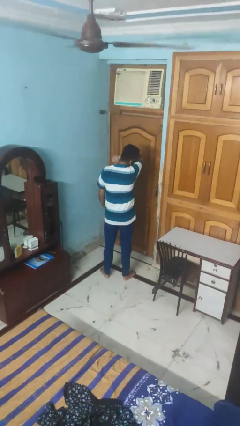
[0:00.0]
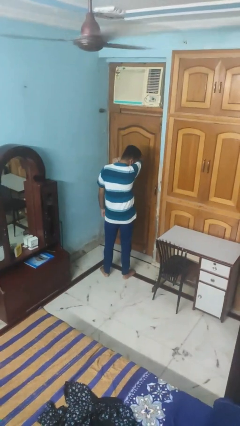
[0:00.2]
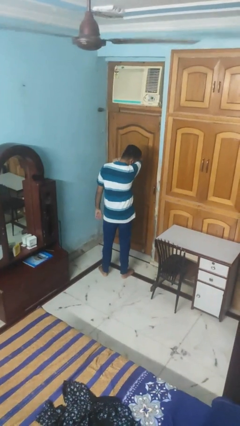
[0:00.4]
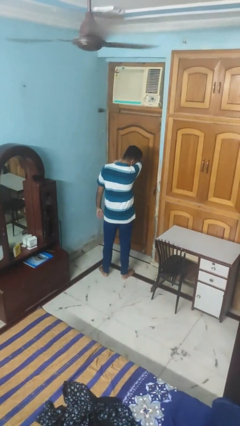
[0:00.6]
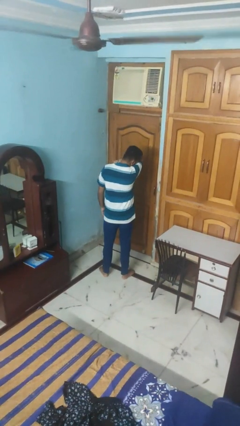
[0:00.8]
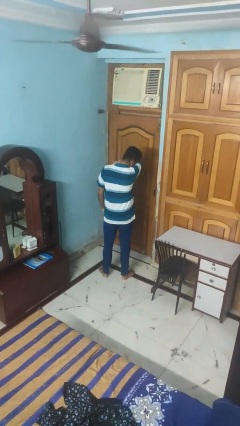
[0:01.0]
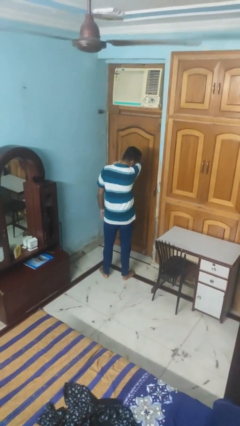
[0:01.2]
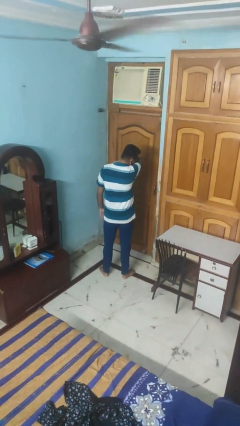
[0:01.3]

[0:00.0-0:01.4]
person sneezes into arm

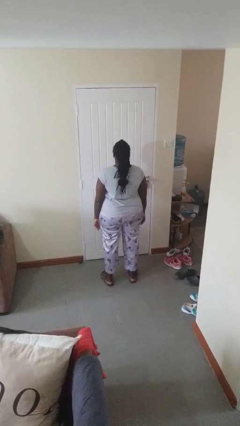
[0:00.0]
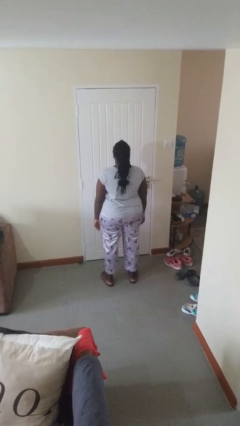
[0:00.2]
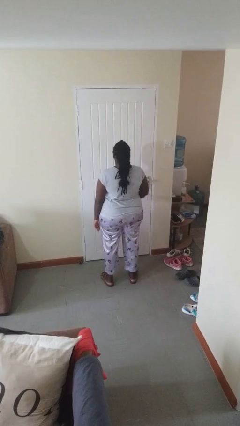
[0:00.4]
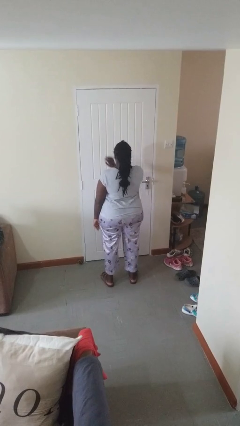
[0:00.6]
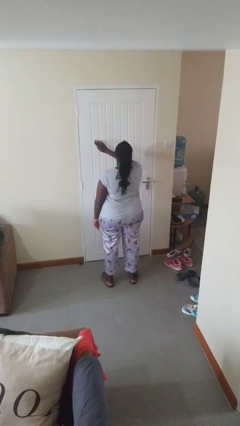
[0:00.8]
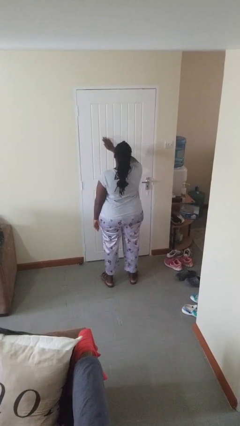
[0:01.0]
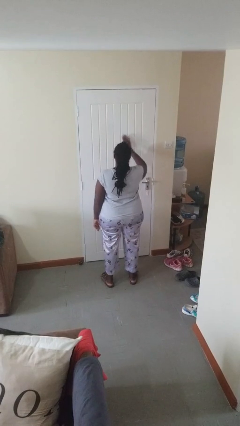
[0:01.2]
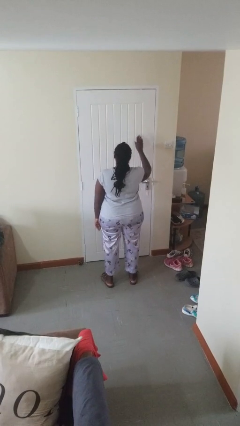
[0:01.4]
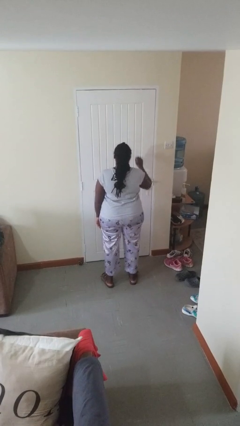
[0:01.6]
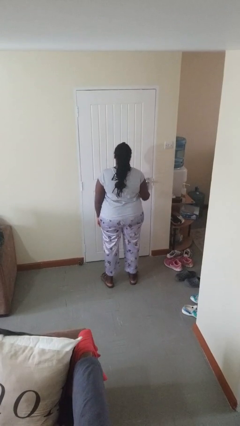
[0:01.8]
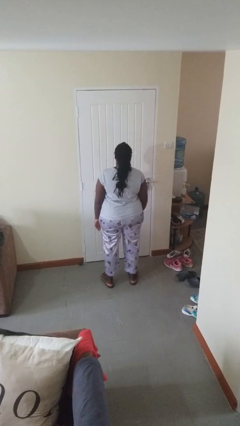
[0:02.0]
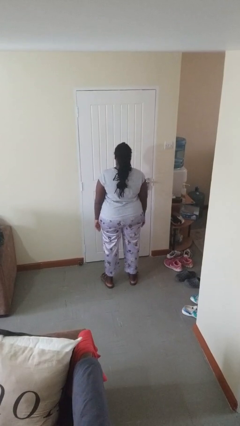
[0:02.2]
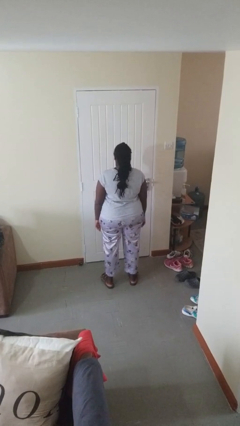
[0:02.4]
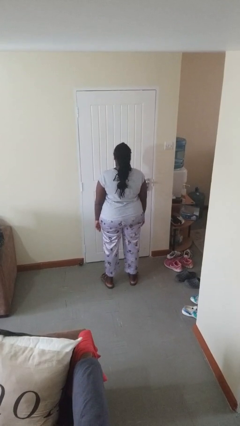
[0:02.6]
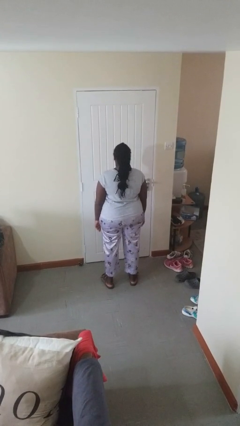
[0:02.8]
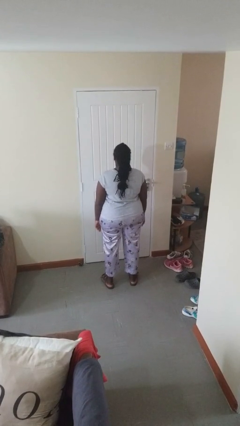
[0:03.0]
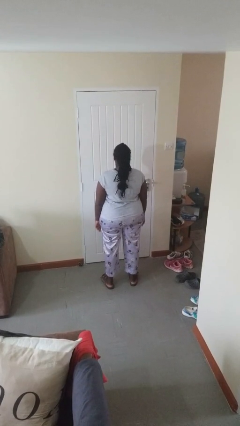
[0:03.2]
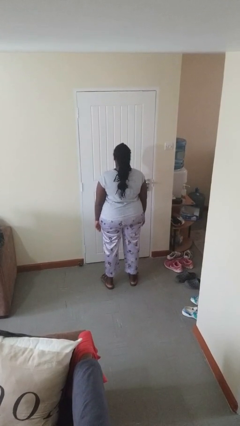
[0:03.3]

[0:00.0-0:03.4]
person gestures swipe right

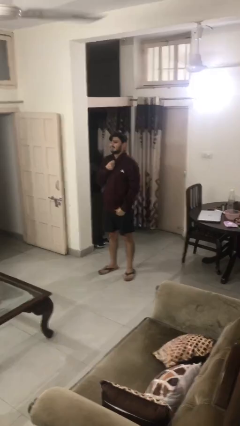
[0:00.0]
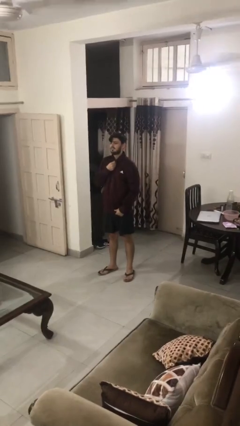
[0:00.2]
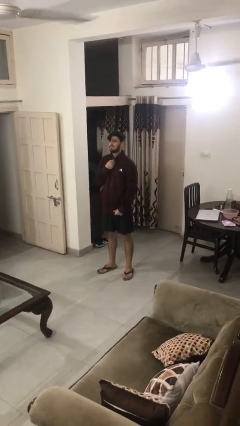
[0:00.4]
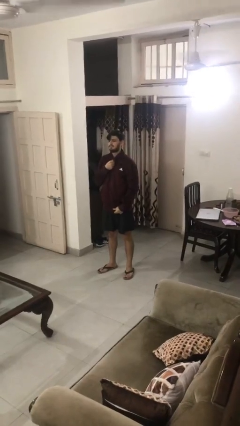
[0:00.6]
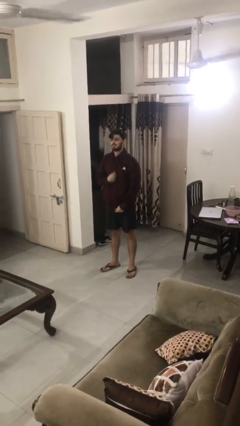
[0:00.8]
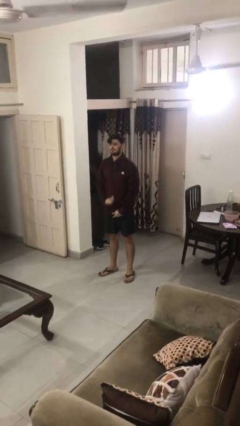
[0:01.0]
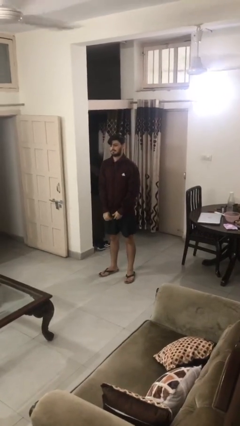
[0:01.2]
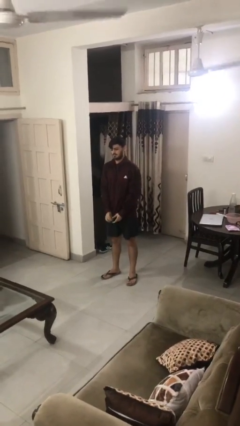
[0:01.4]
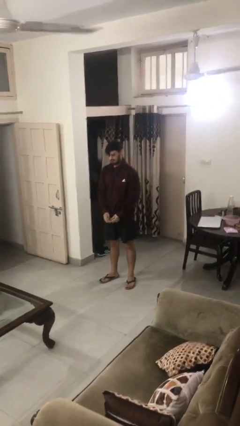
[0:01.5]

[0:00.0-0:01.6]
person unzips jacket

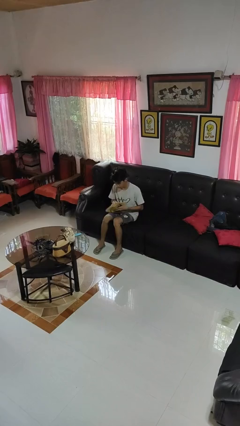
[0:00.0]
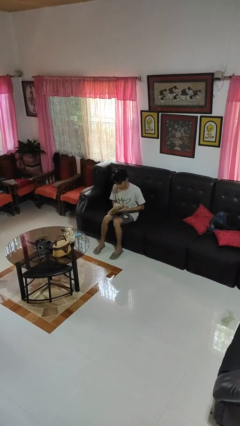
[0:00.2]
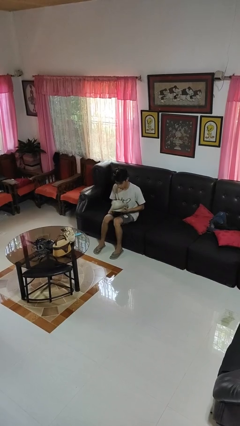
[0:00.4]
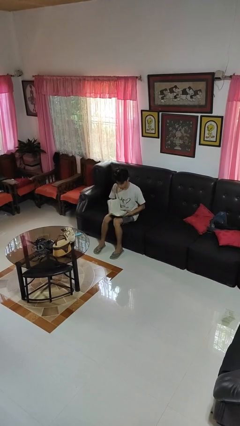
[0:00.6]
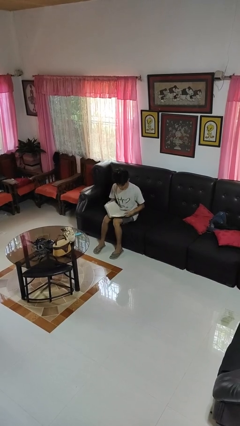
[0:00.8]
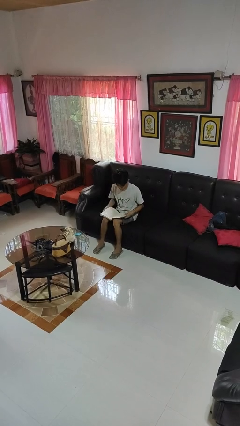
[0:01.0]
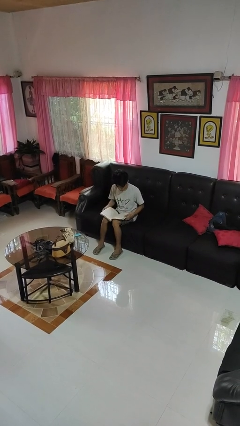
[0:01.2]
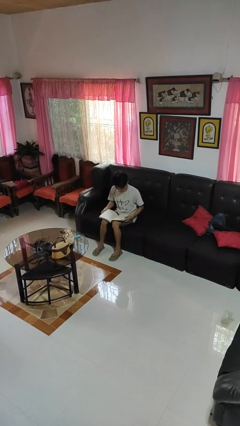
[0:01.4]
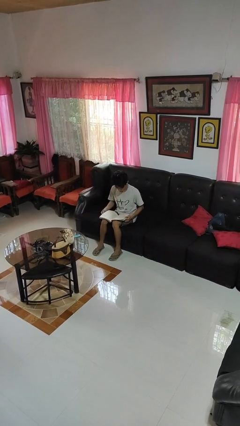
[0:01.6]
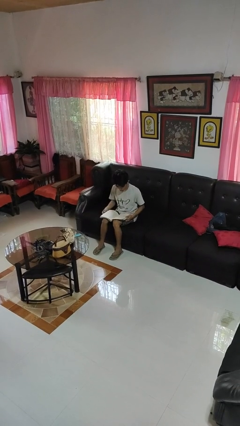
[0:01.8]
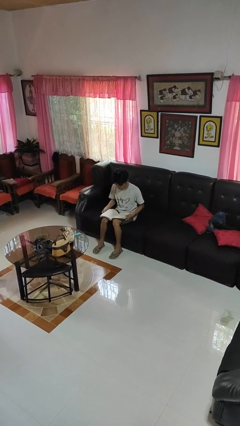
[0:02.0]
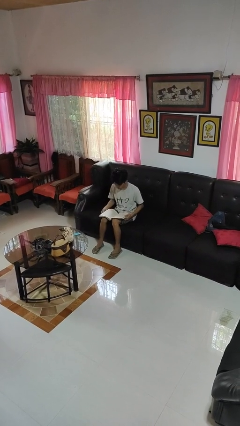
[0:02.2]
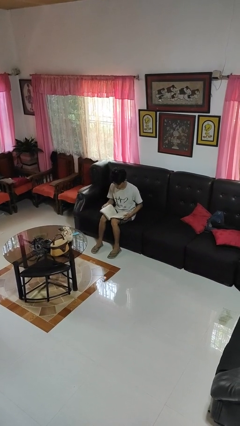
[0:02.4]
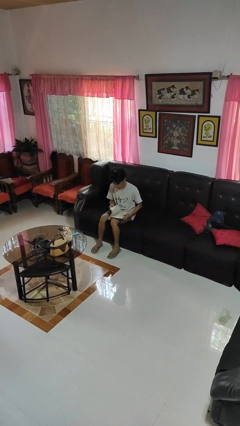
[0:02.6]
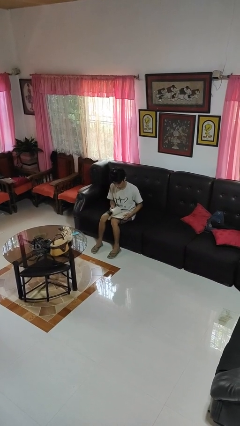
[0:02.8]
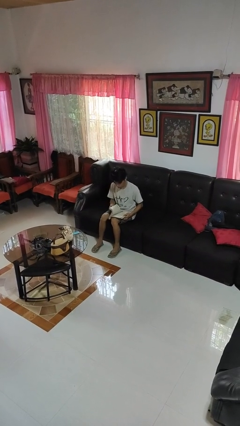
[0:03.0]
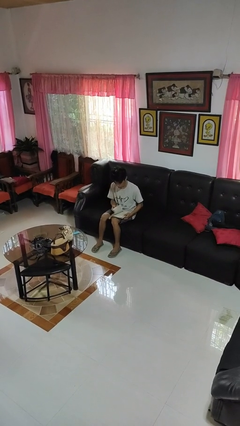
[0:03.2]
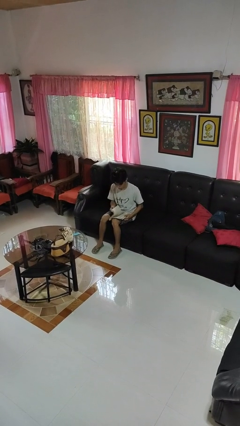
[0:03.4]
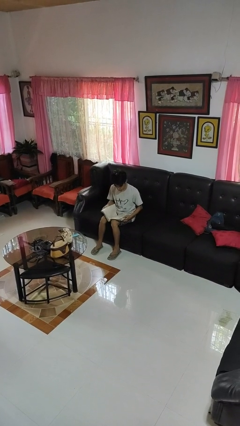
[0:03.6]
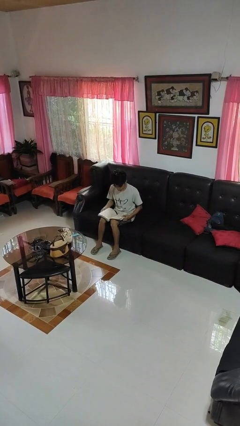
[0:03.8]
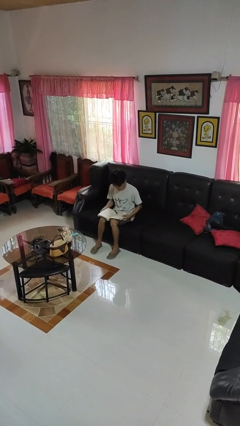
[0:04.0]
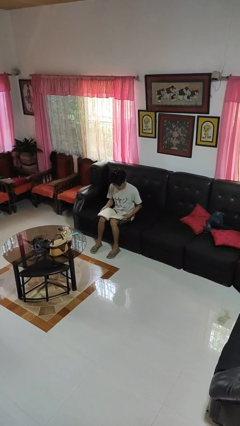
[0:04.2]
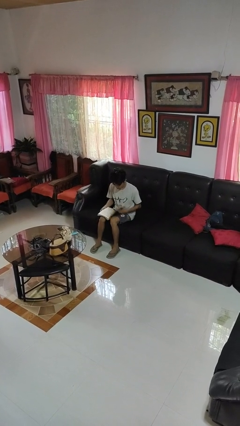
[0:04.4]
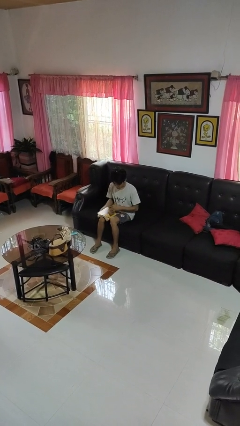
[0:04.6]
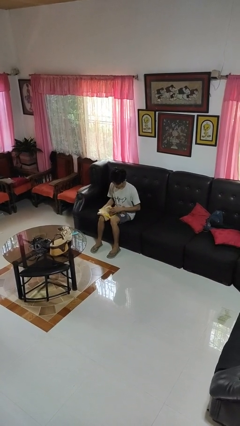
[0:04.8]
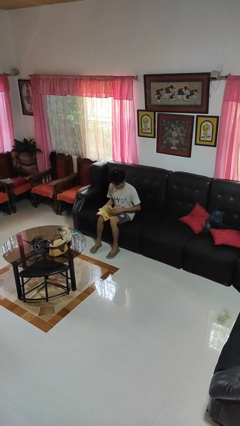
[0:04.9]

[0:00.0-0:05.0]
person reads book

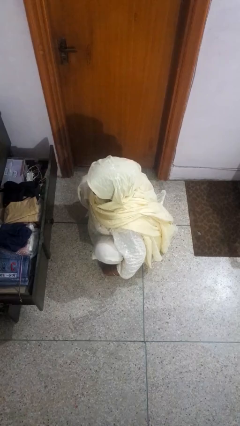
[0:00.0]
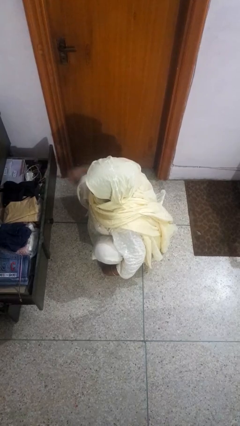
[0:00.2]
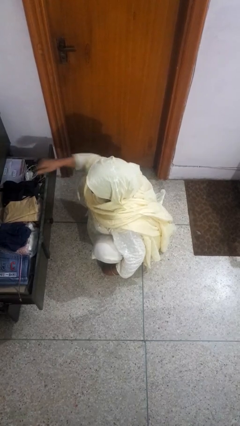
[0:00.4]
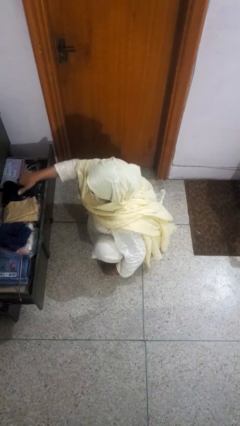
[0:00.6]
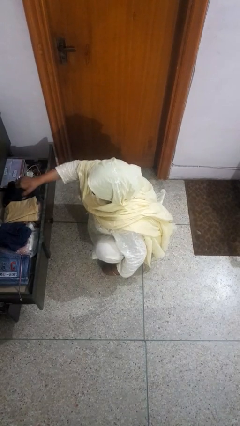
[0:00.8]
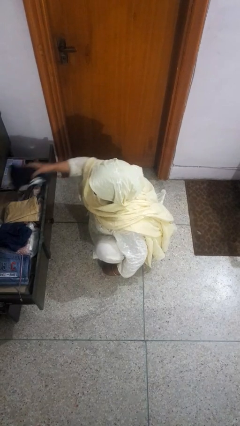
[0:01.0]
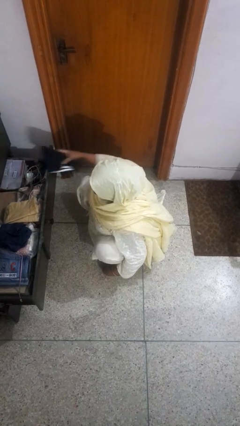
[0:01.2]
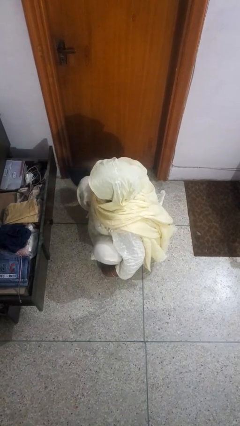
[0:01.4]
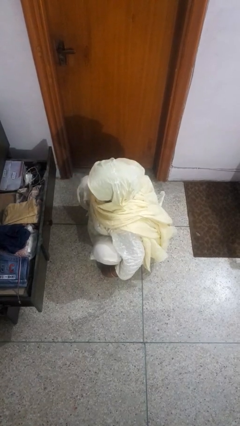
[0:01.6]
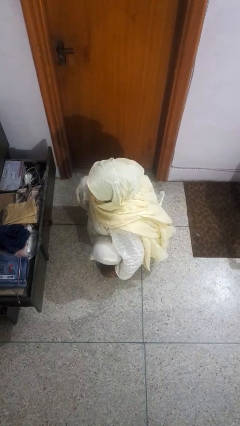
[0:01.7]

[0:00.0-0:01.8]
person takes clothes from dresser

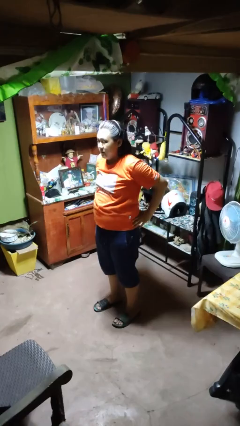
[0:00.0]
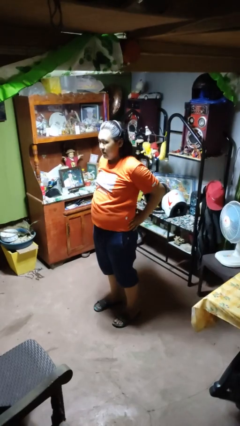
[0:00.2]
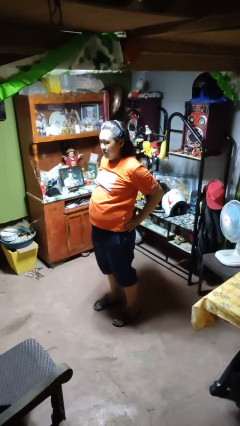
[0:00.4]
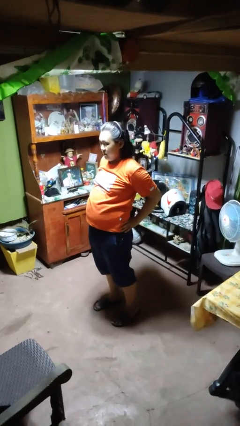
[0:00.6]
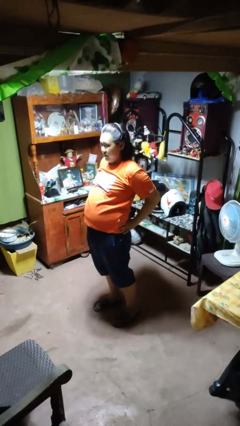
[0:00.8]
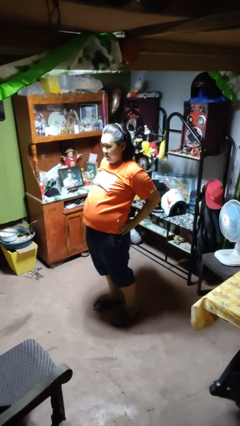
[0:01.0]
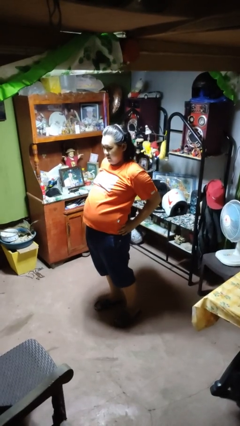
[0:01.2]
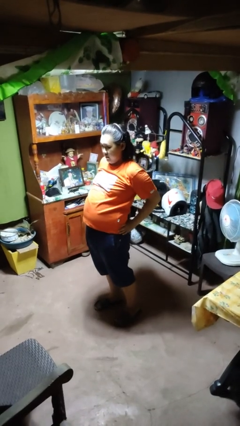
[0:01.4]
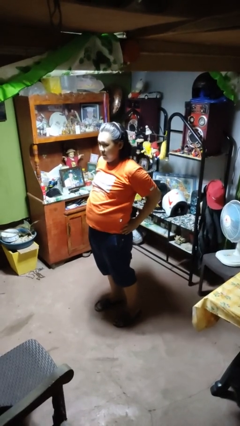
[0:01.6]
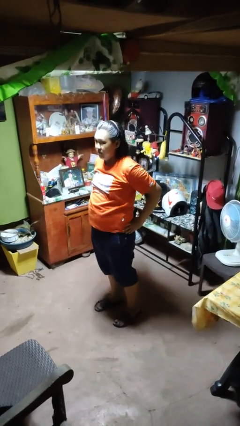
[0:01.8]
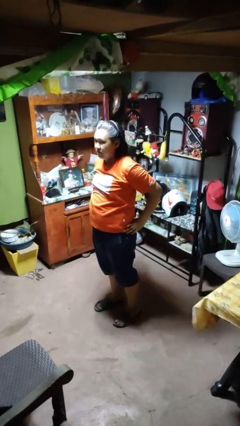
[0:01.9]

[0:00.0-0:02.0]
person stretches back

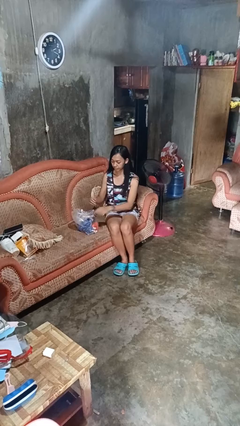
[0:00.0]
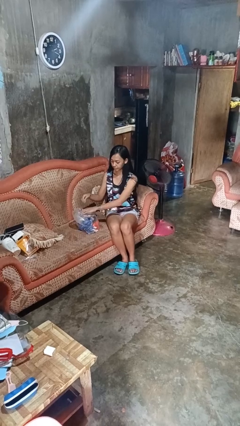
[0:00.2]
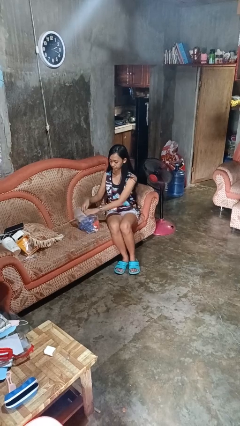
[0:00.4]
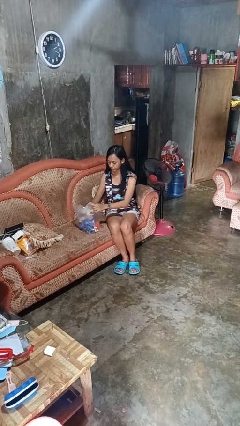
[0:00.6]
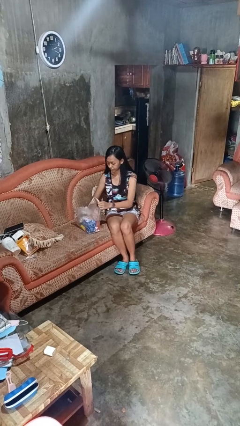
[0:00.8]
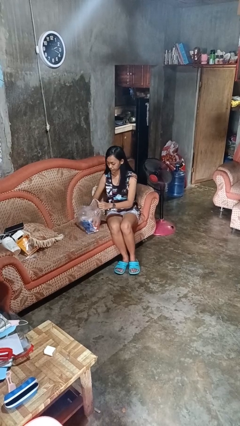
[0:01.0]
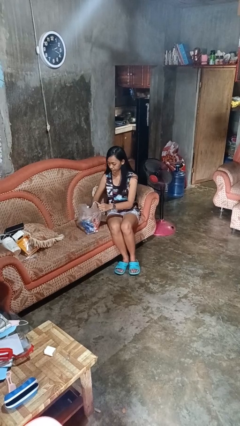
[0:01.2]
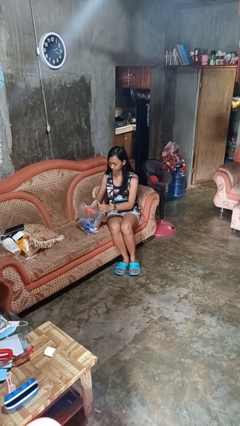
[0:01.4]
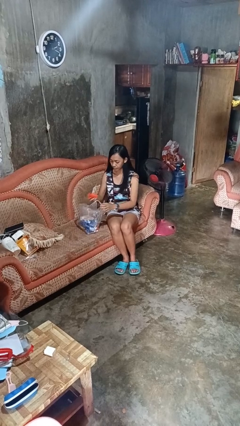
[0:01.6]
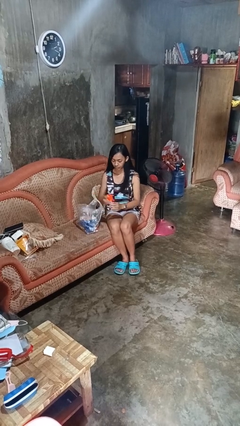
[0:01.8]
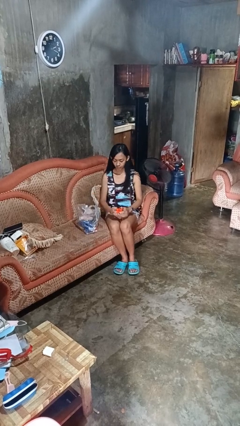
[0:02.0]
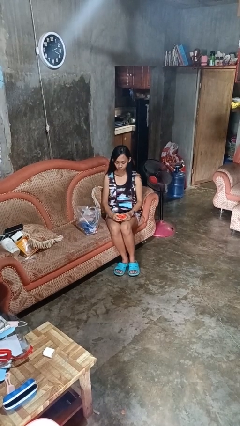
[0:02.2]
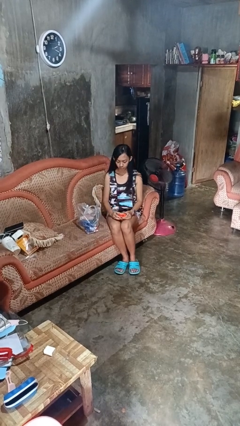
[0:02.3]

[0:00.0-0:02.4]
person takes object from bag
